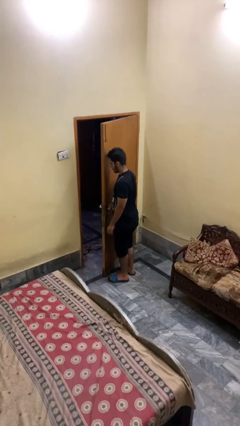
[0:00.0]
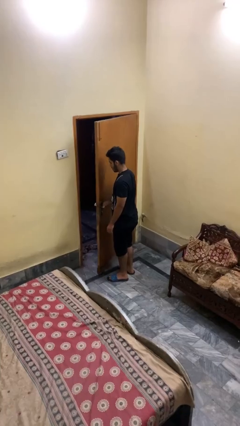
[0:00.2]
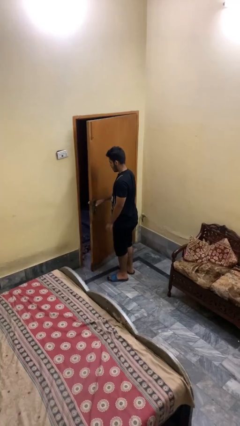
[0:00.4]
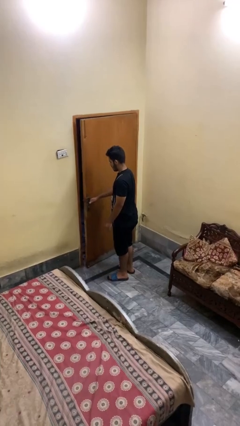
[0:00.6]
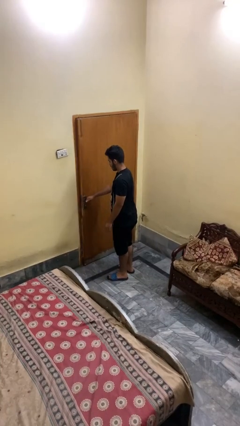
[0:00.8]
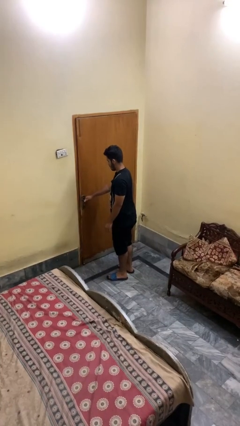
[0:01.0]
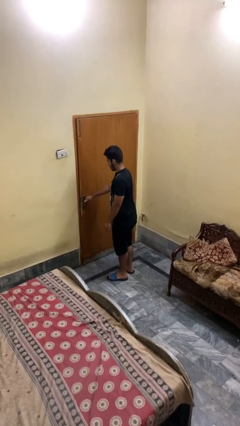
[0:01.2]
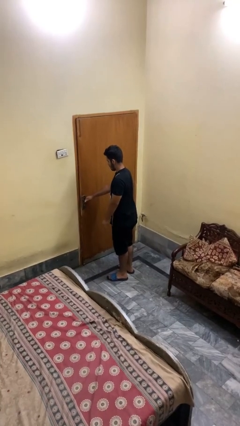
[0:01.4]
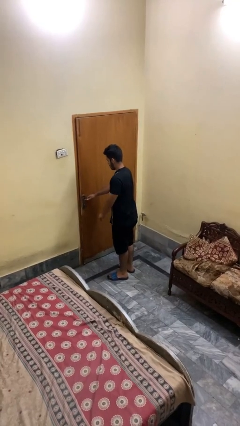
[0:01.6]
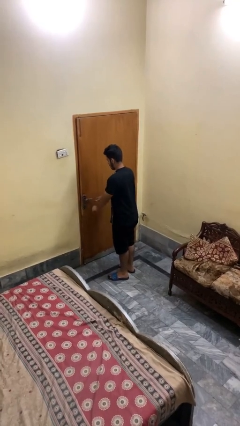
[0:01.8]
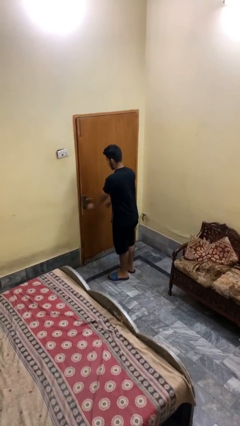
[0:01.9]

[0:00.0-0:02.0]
person closes facility door

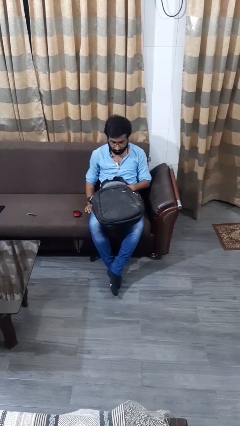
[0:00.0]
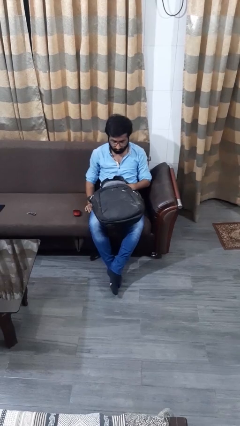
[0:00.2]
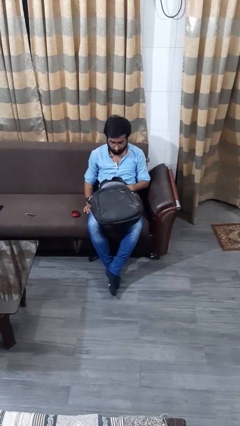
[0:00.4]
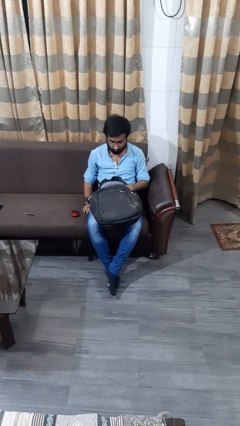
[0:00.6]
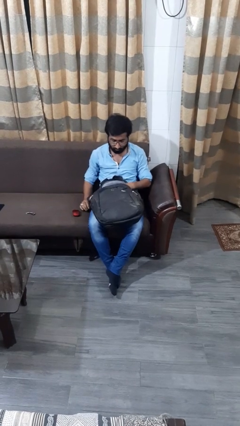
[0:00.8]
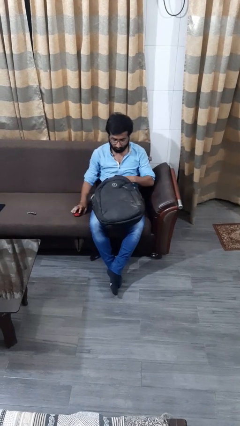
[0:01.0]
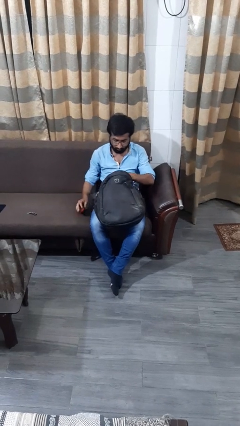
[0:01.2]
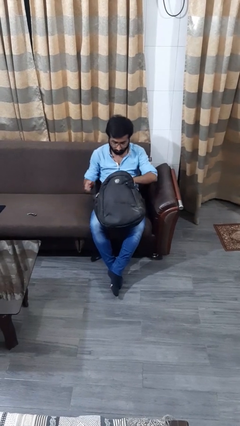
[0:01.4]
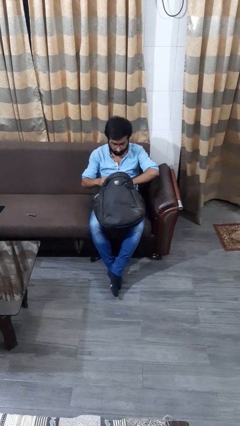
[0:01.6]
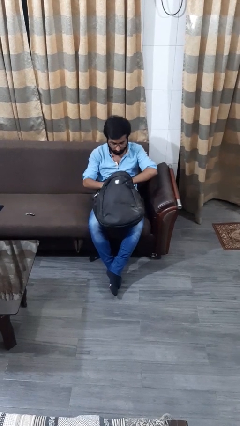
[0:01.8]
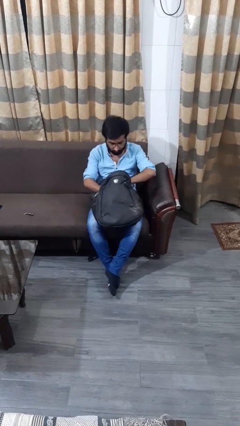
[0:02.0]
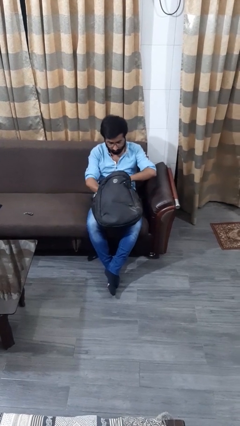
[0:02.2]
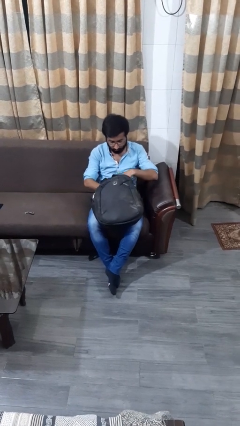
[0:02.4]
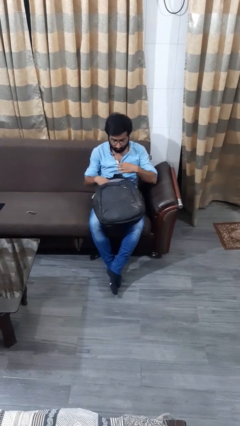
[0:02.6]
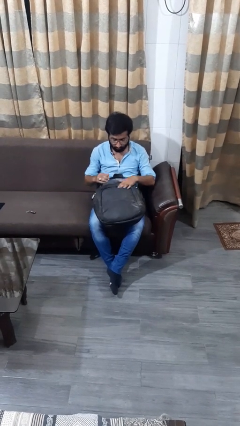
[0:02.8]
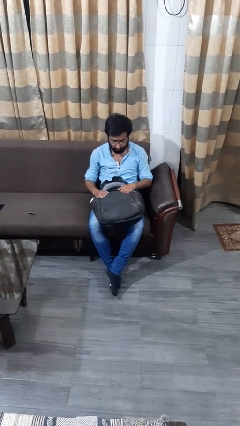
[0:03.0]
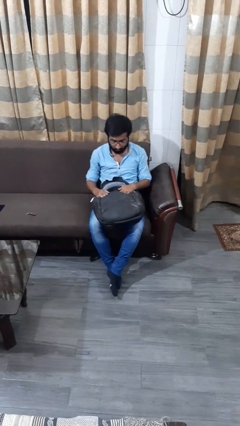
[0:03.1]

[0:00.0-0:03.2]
person puts object into backpack

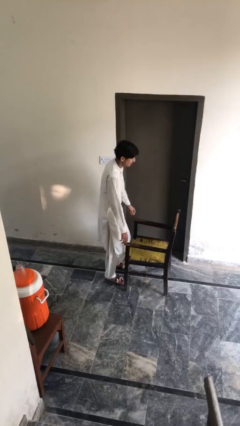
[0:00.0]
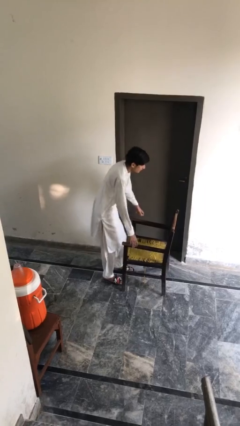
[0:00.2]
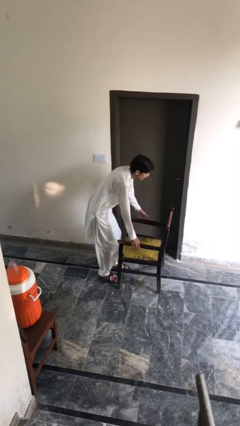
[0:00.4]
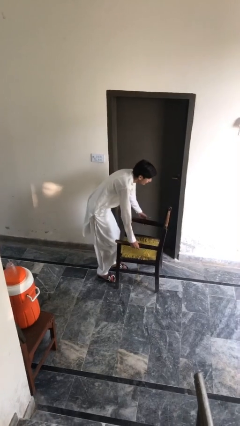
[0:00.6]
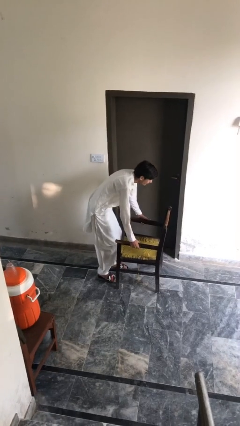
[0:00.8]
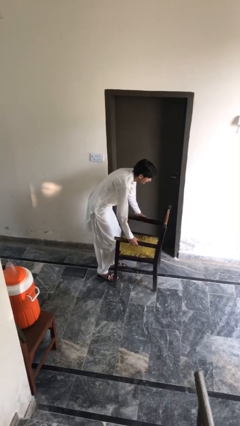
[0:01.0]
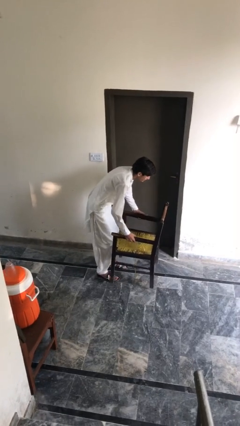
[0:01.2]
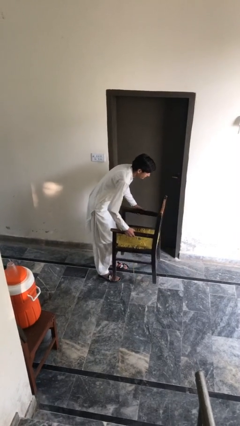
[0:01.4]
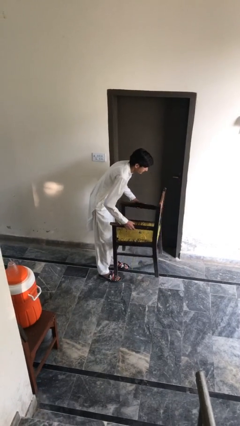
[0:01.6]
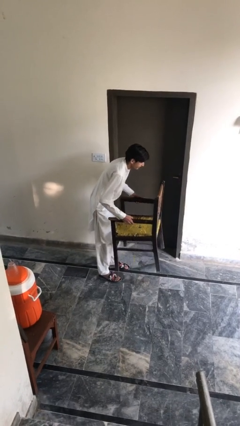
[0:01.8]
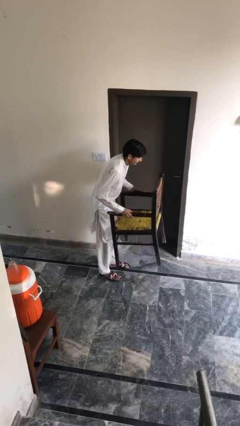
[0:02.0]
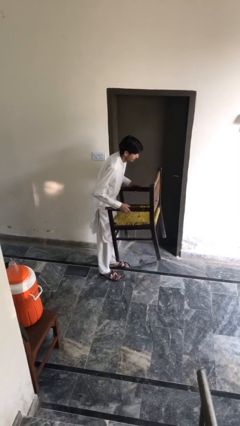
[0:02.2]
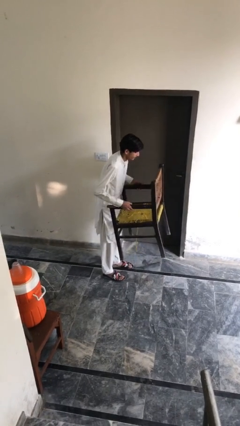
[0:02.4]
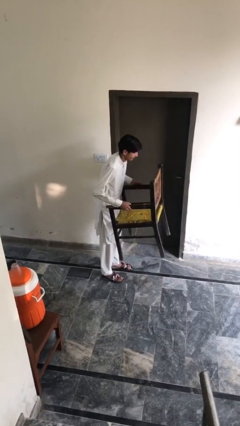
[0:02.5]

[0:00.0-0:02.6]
person picks up object from floor

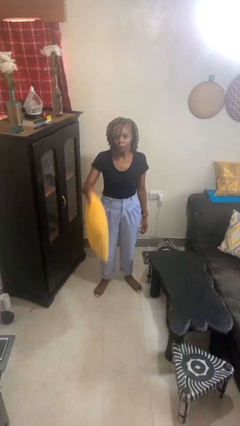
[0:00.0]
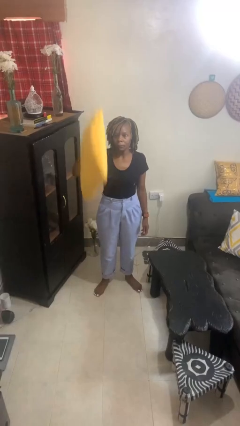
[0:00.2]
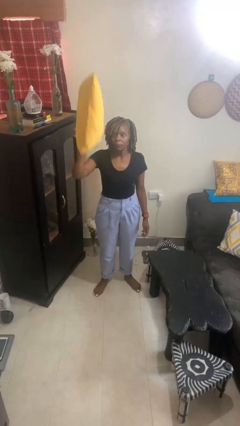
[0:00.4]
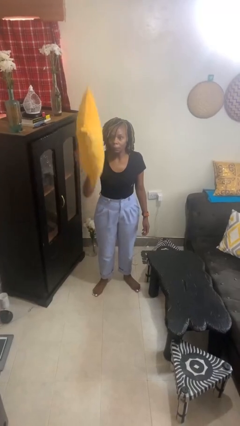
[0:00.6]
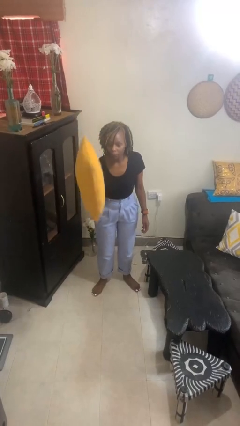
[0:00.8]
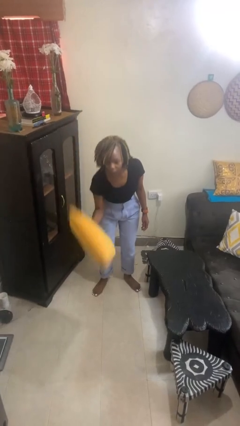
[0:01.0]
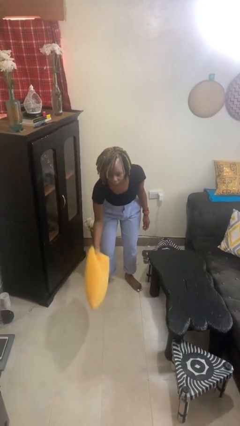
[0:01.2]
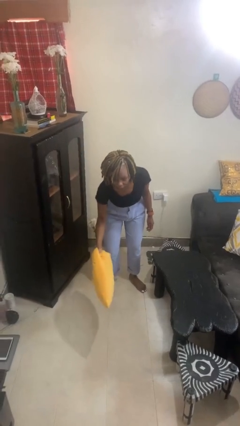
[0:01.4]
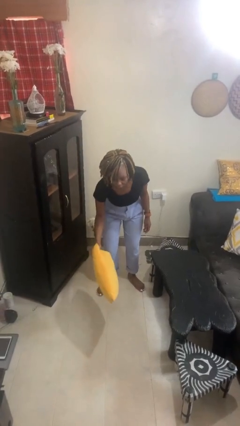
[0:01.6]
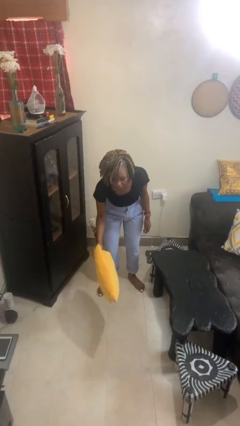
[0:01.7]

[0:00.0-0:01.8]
person drops object

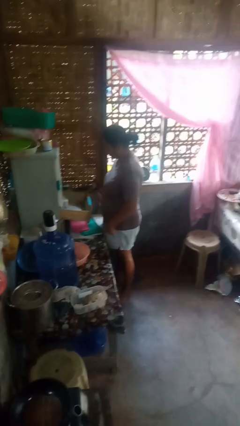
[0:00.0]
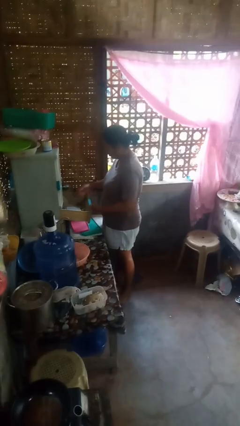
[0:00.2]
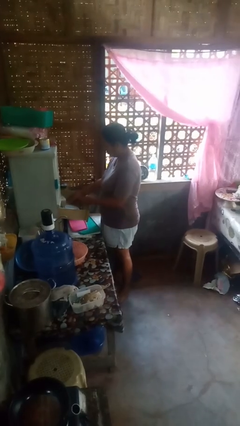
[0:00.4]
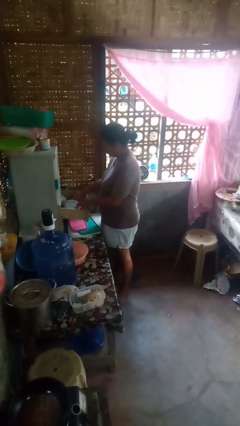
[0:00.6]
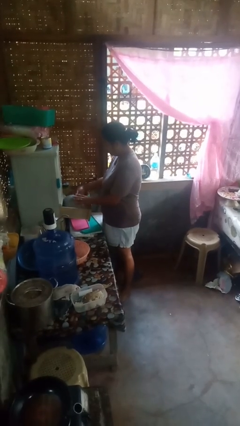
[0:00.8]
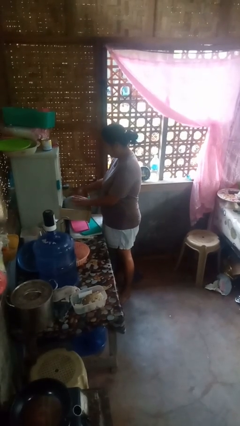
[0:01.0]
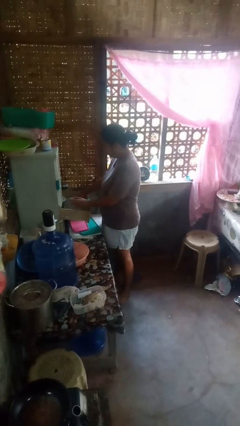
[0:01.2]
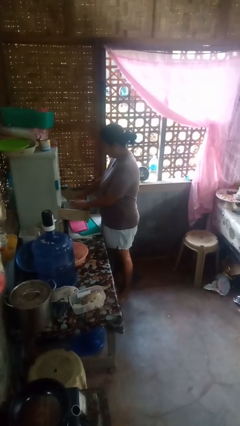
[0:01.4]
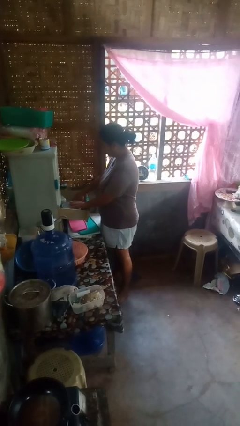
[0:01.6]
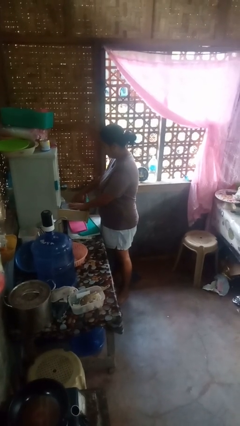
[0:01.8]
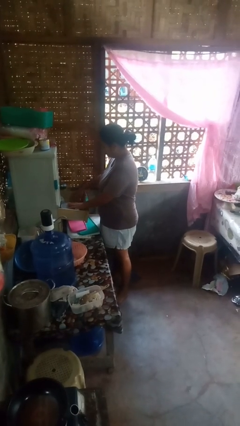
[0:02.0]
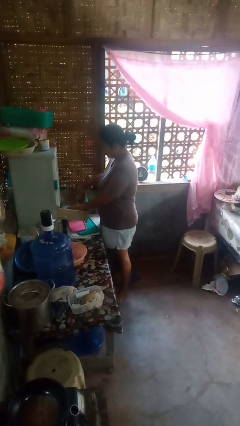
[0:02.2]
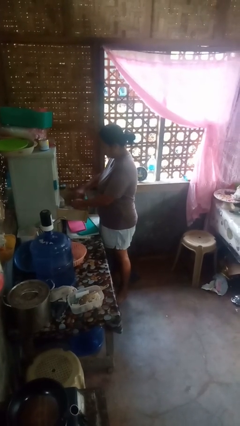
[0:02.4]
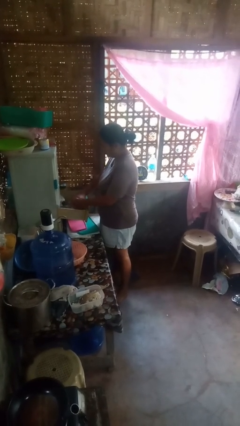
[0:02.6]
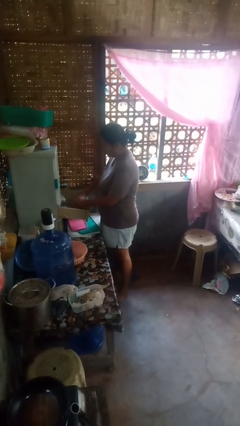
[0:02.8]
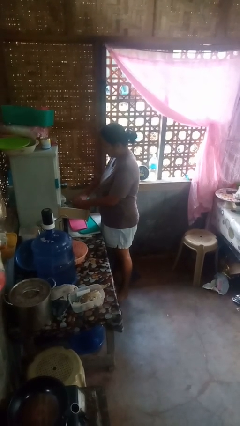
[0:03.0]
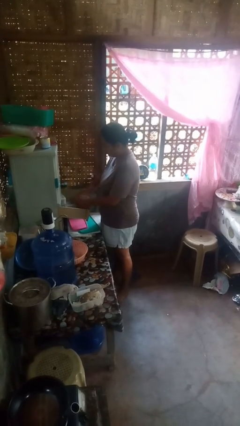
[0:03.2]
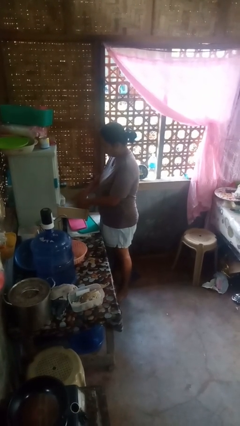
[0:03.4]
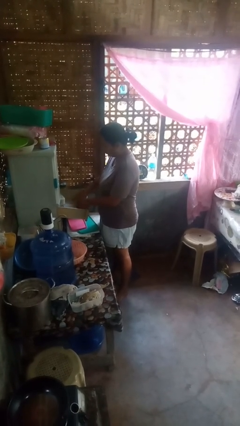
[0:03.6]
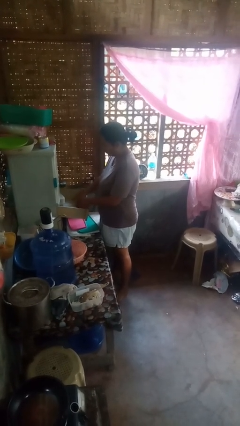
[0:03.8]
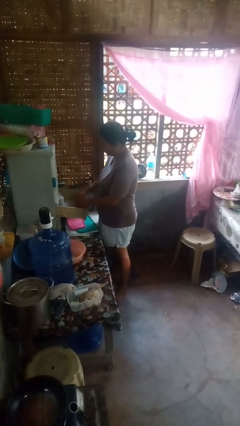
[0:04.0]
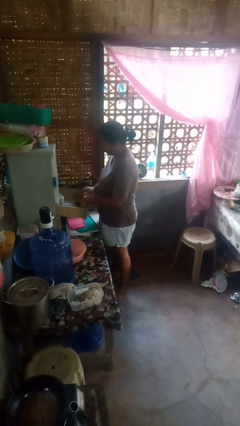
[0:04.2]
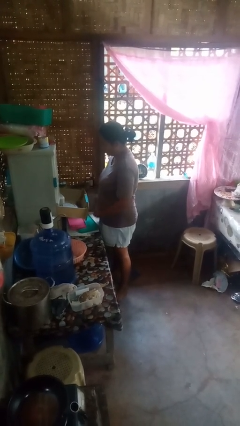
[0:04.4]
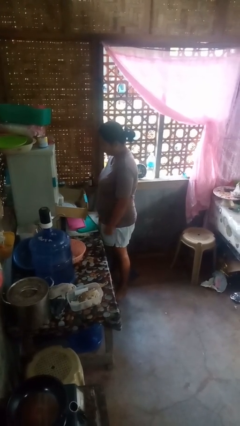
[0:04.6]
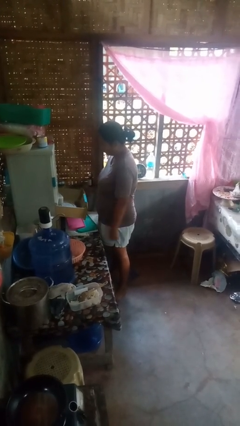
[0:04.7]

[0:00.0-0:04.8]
person searches in kitchen drawer

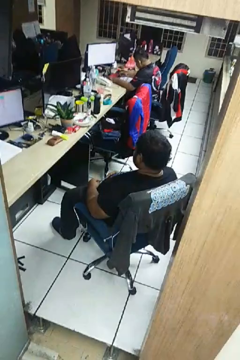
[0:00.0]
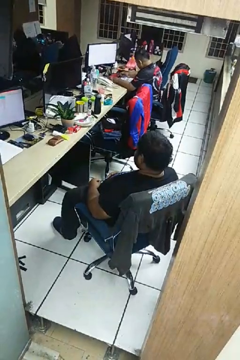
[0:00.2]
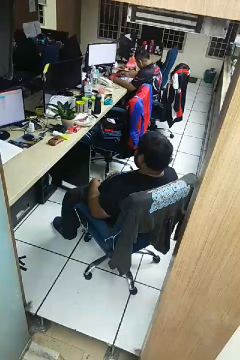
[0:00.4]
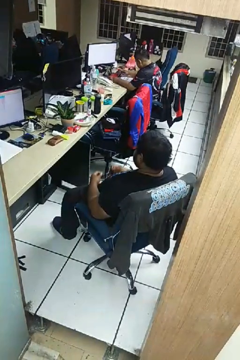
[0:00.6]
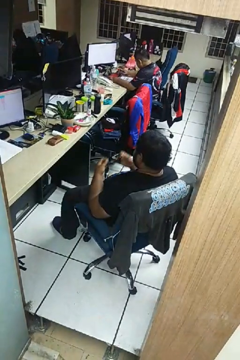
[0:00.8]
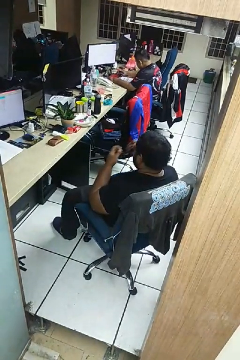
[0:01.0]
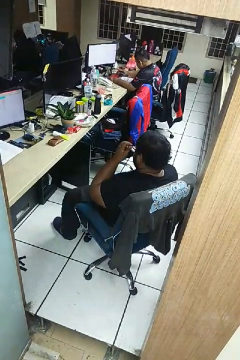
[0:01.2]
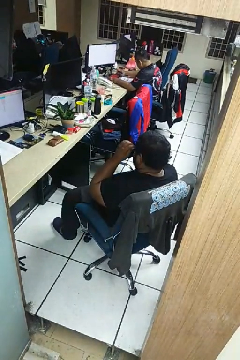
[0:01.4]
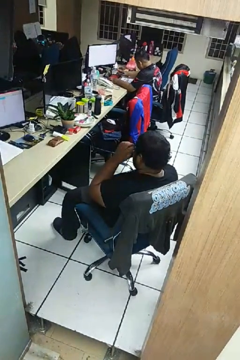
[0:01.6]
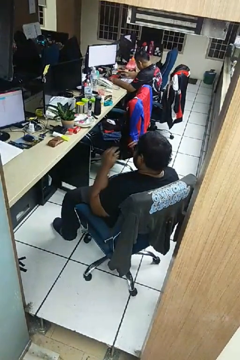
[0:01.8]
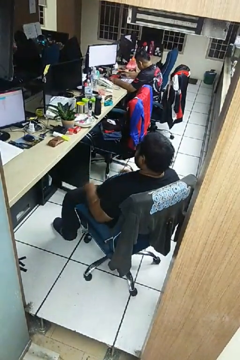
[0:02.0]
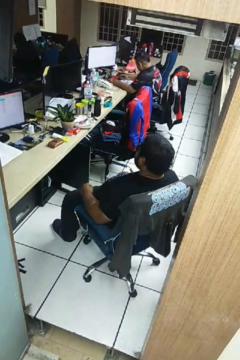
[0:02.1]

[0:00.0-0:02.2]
person puts on sunglasses

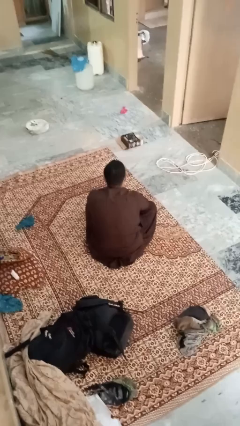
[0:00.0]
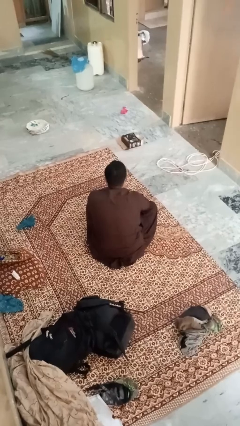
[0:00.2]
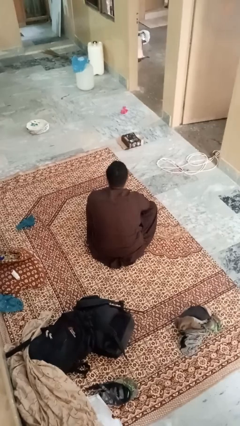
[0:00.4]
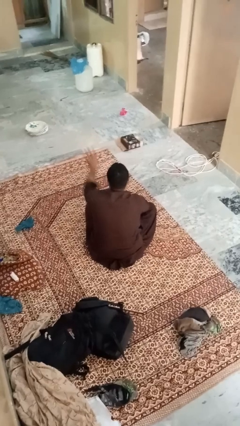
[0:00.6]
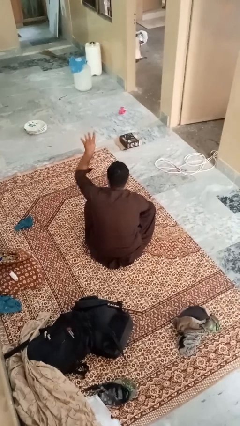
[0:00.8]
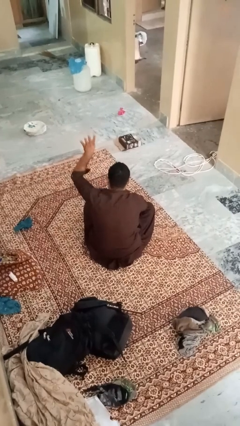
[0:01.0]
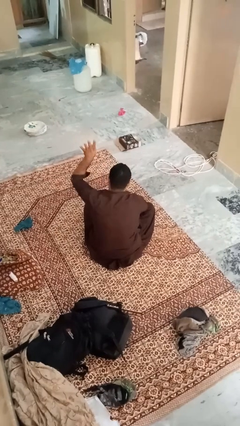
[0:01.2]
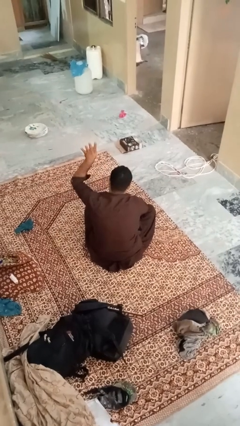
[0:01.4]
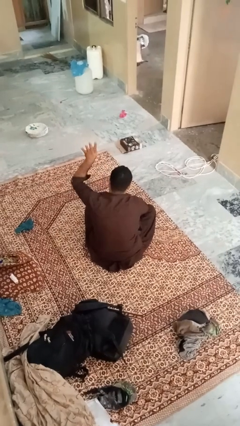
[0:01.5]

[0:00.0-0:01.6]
person gestures number four
